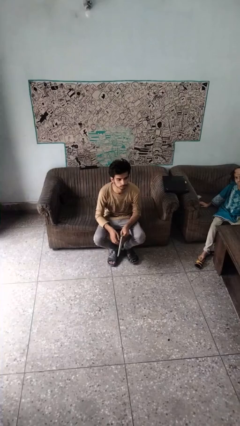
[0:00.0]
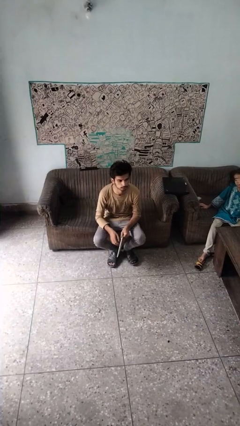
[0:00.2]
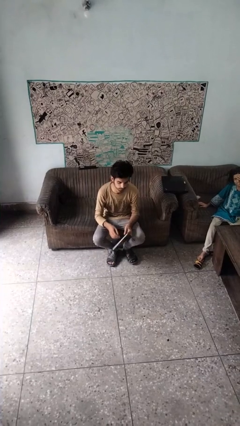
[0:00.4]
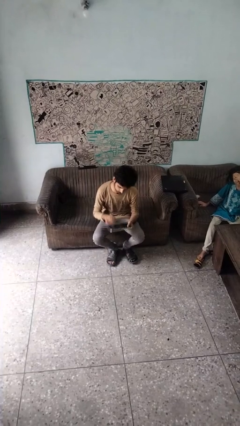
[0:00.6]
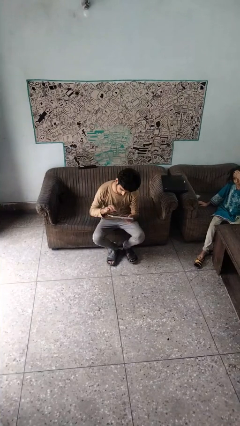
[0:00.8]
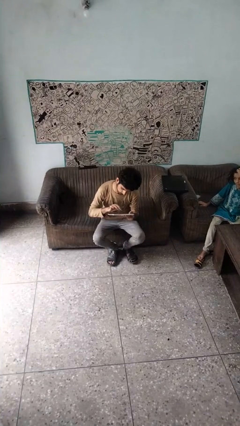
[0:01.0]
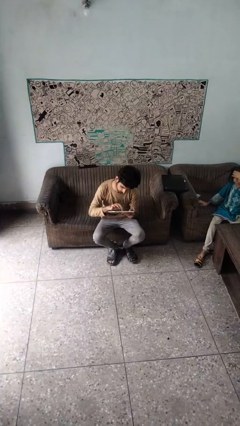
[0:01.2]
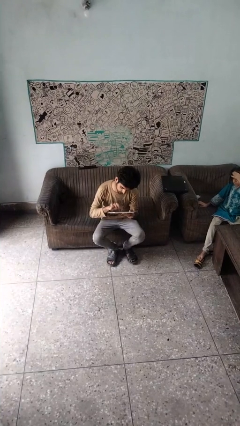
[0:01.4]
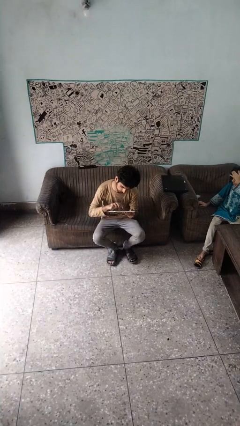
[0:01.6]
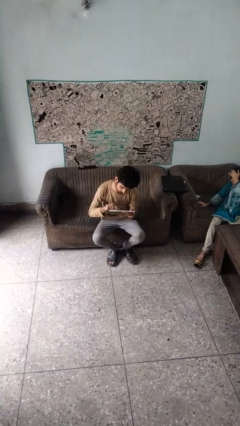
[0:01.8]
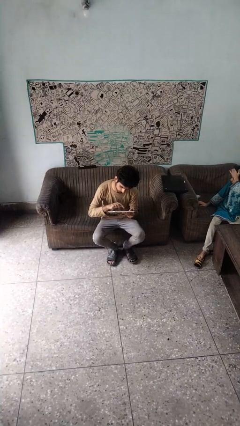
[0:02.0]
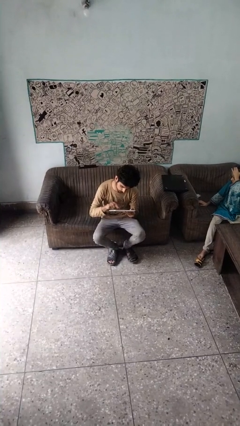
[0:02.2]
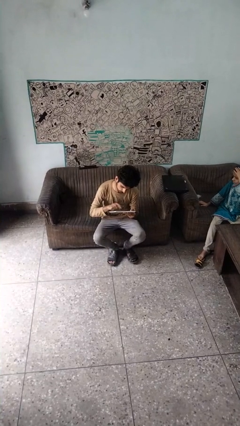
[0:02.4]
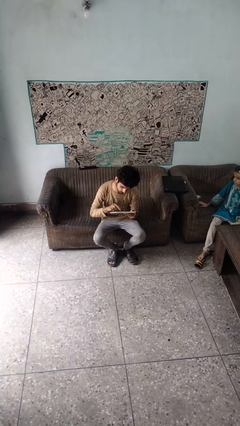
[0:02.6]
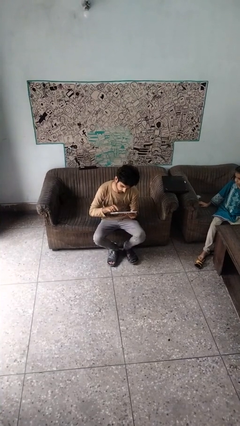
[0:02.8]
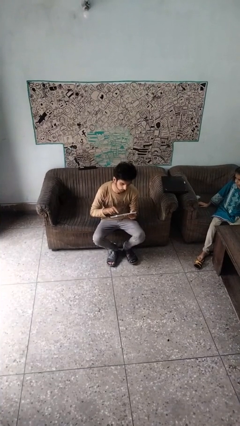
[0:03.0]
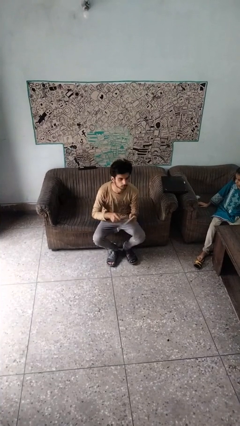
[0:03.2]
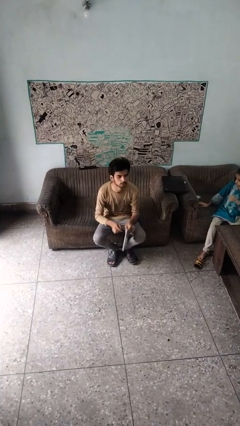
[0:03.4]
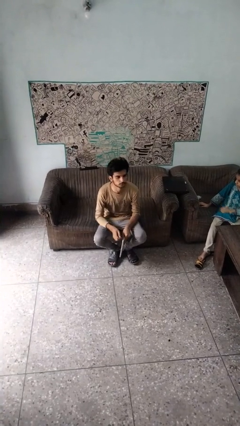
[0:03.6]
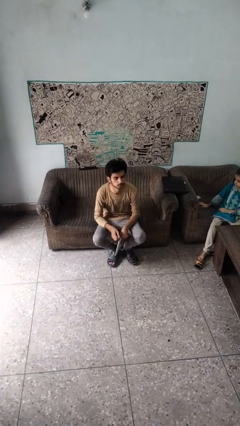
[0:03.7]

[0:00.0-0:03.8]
person interacts with tablet

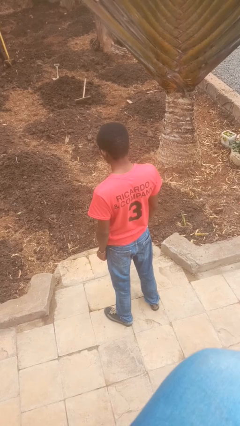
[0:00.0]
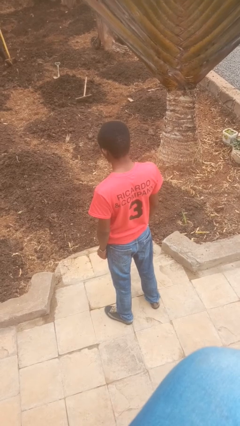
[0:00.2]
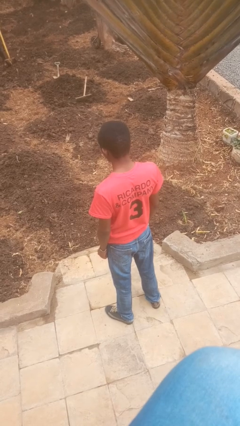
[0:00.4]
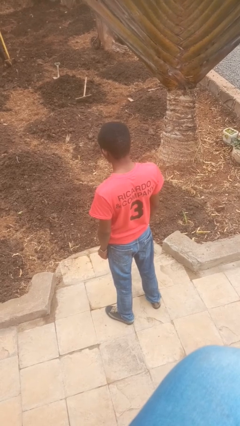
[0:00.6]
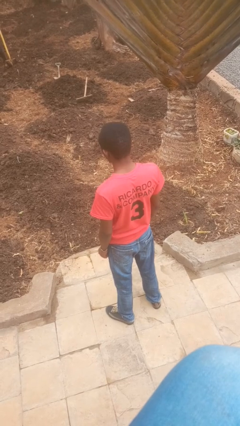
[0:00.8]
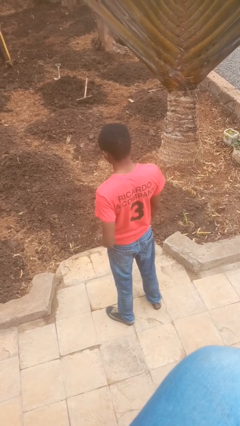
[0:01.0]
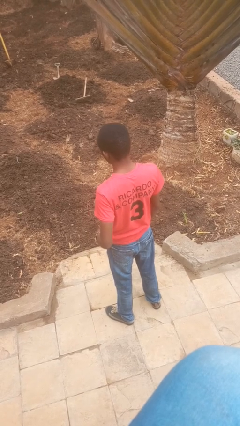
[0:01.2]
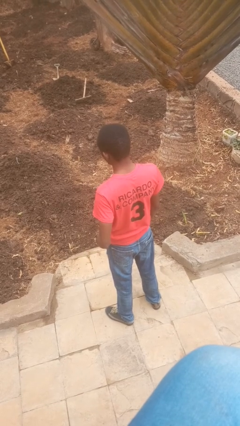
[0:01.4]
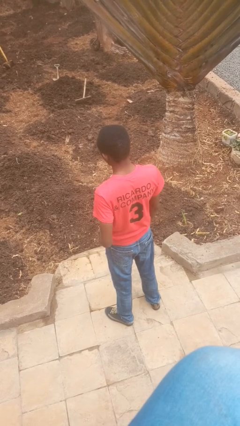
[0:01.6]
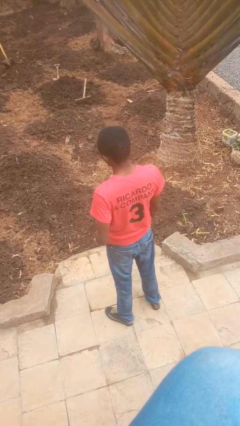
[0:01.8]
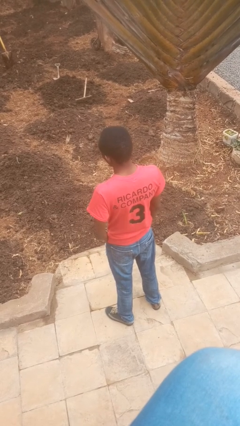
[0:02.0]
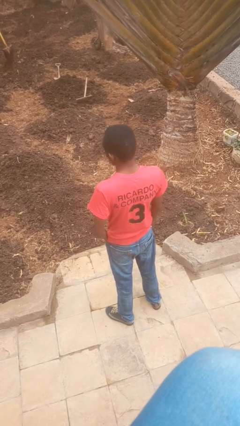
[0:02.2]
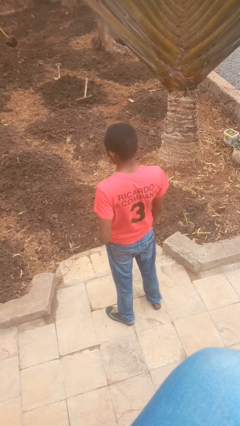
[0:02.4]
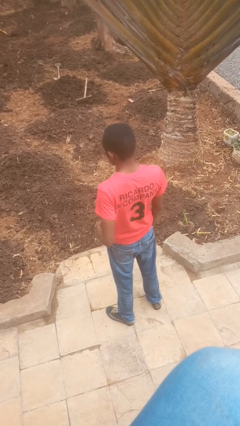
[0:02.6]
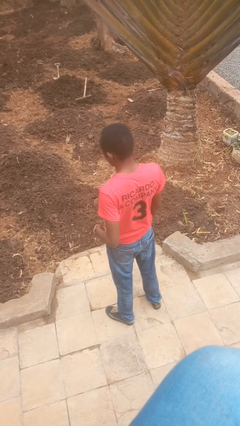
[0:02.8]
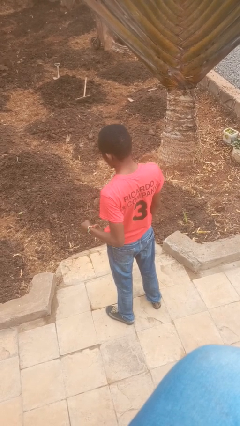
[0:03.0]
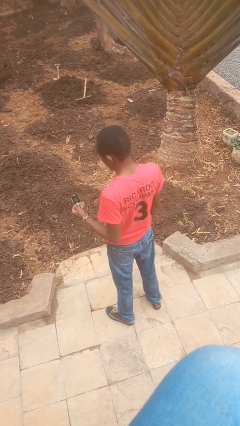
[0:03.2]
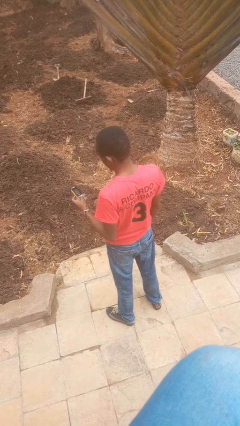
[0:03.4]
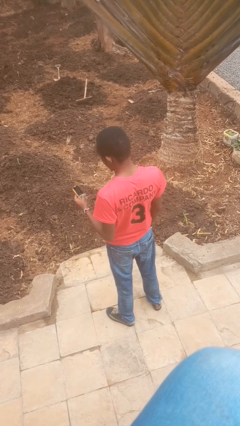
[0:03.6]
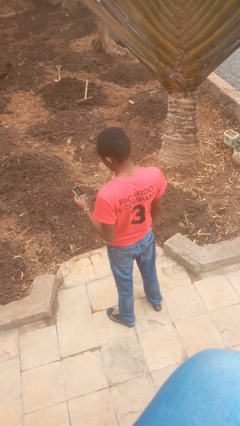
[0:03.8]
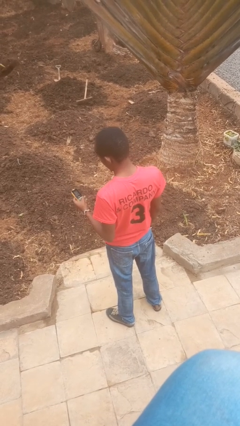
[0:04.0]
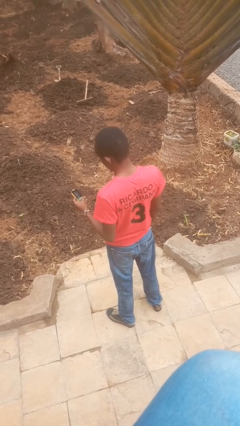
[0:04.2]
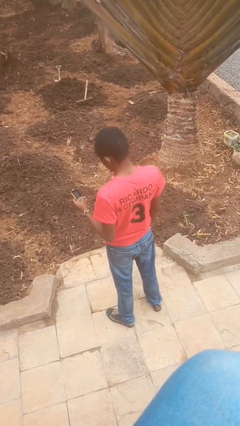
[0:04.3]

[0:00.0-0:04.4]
person takes phone from pocket

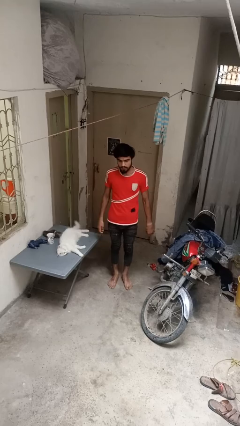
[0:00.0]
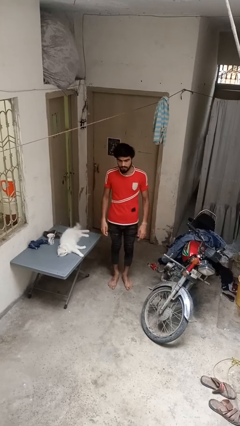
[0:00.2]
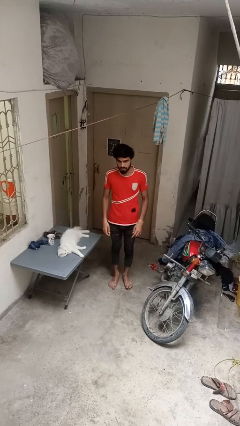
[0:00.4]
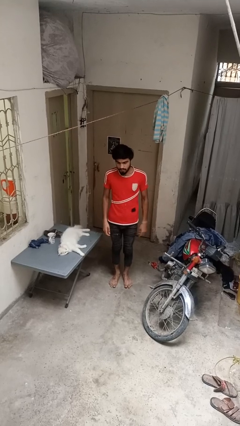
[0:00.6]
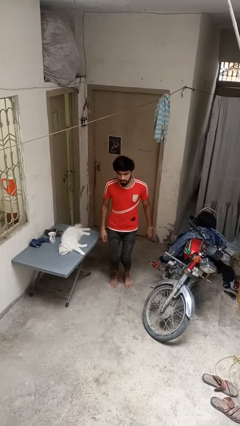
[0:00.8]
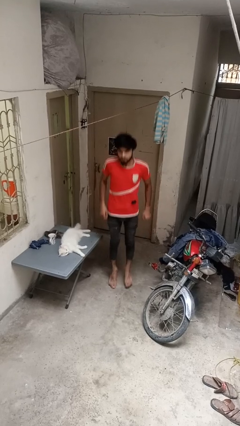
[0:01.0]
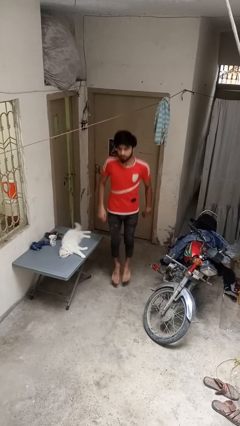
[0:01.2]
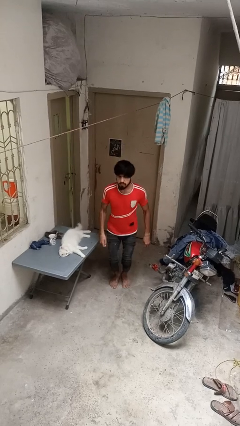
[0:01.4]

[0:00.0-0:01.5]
person jumps

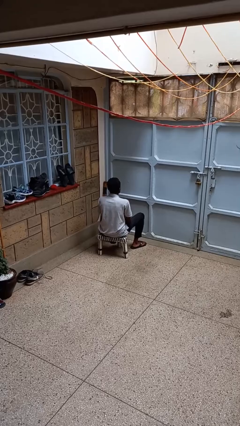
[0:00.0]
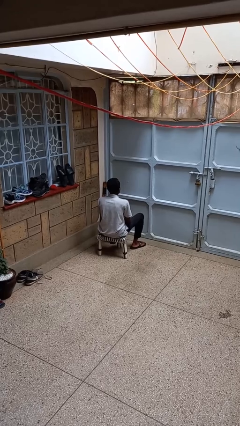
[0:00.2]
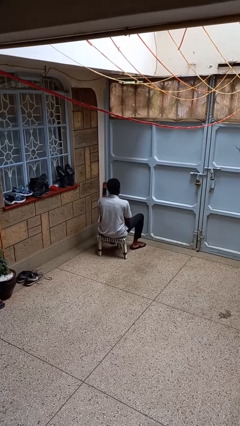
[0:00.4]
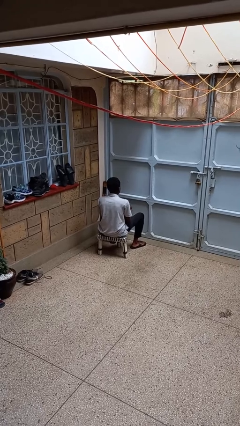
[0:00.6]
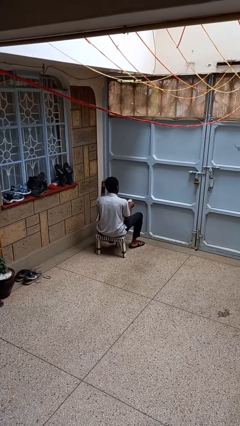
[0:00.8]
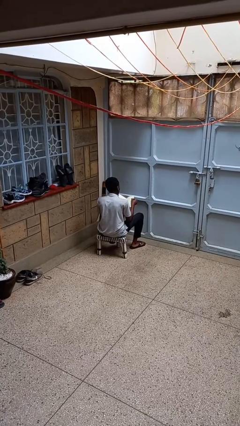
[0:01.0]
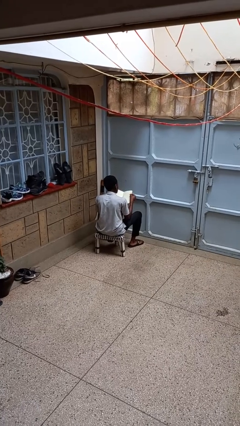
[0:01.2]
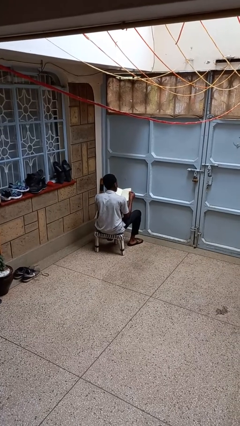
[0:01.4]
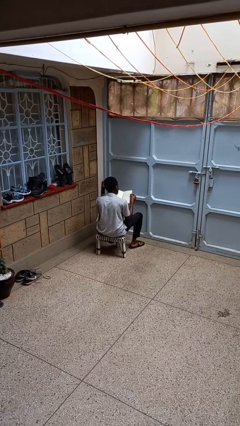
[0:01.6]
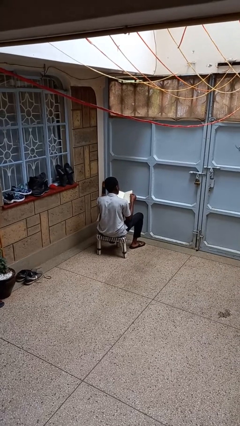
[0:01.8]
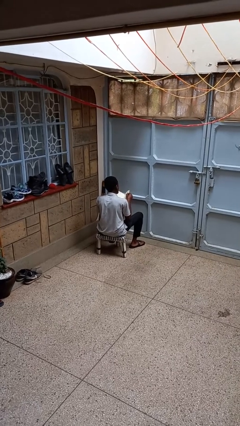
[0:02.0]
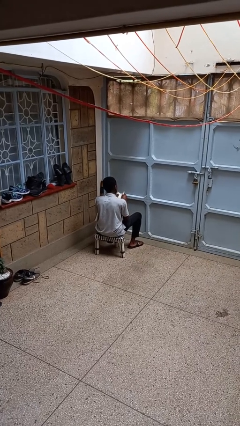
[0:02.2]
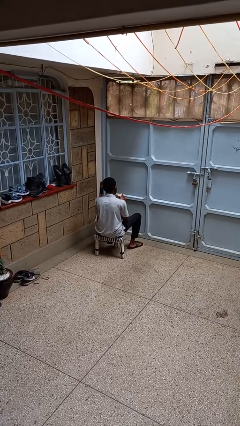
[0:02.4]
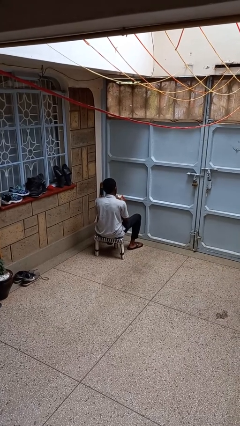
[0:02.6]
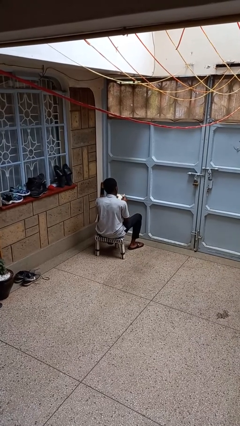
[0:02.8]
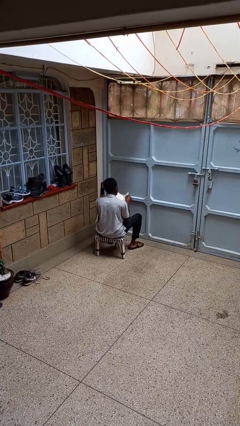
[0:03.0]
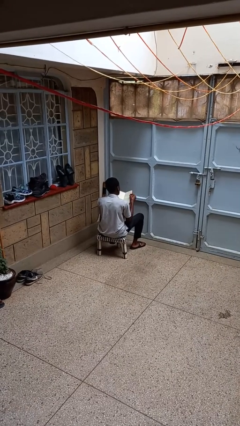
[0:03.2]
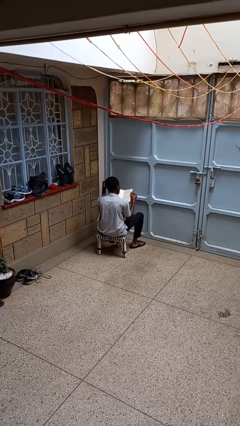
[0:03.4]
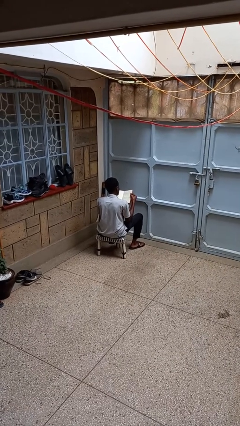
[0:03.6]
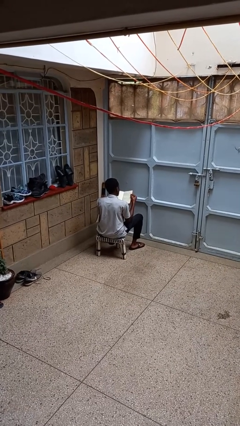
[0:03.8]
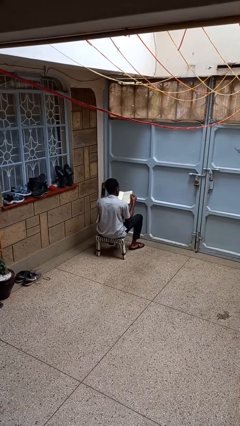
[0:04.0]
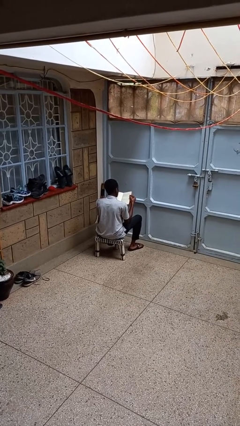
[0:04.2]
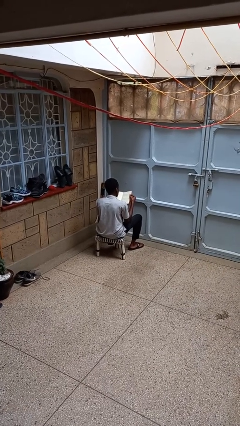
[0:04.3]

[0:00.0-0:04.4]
person reads book

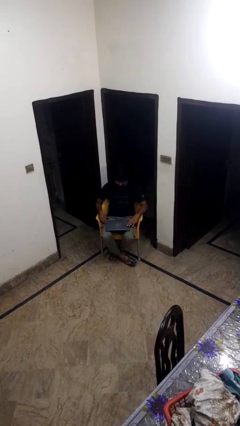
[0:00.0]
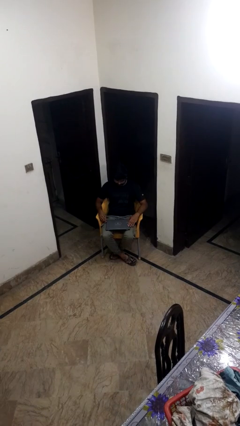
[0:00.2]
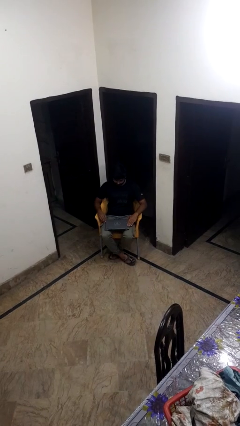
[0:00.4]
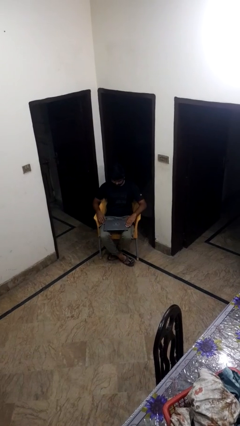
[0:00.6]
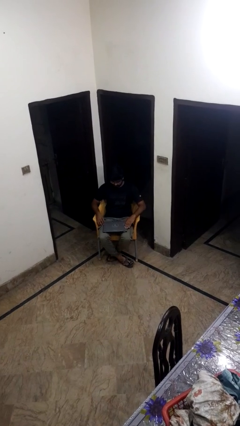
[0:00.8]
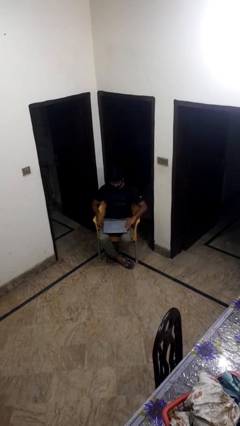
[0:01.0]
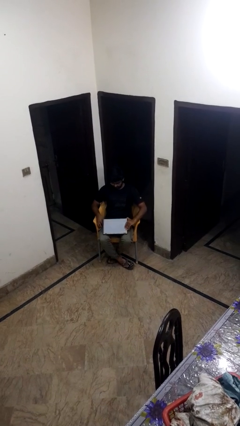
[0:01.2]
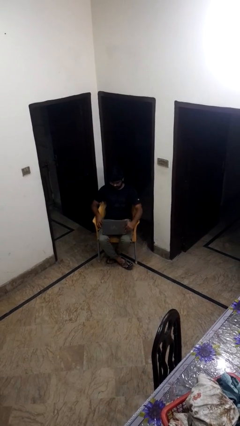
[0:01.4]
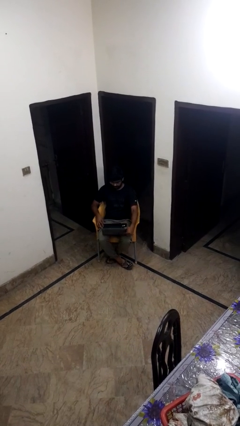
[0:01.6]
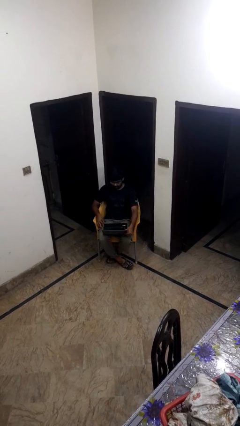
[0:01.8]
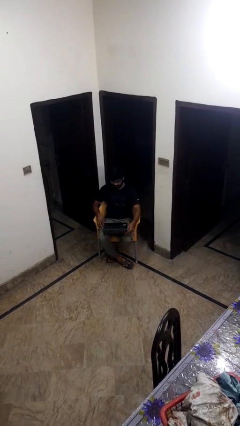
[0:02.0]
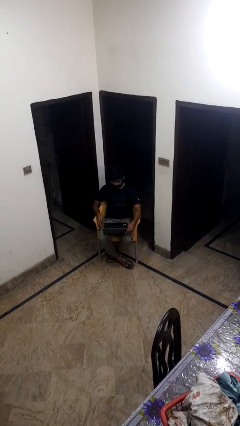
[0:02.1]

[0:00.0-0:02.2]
person opens laptop

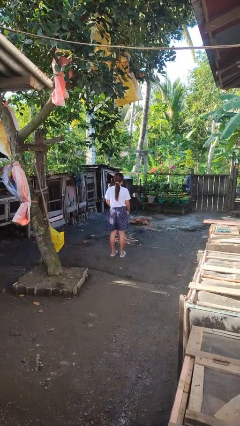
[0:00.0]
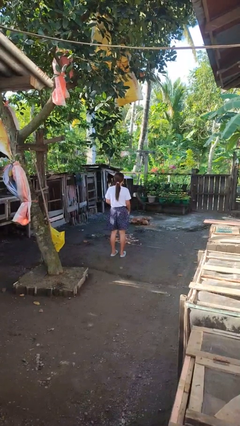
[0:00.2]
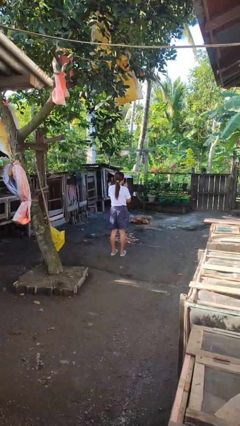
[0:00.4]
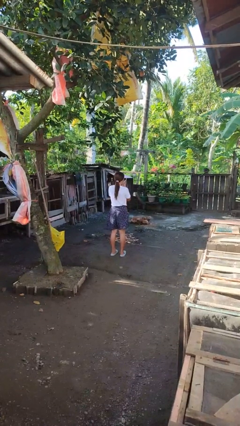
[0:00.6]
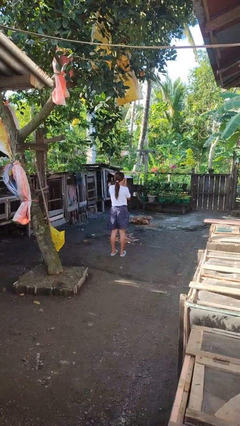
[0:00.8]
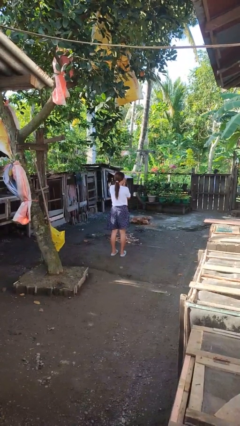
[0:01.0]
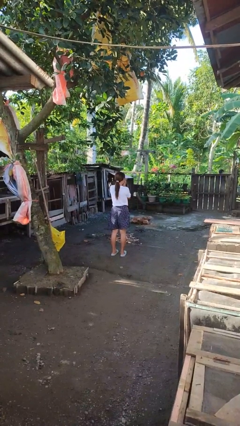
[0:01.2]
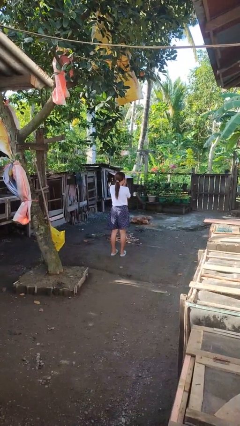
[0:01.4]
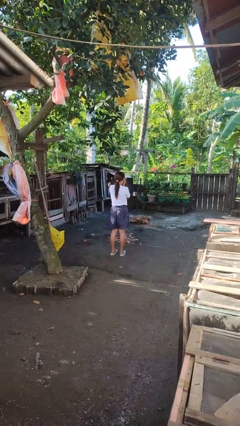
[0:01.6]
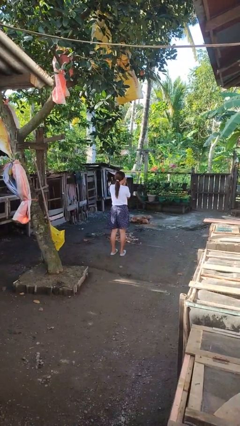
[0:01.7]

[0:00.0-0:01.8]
person blows into hands
